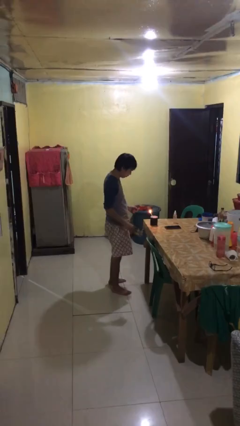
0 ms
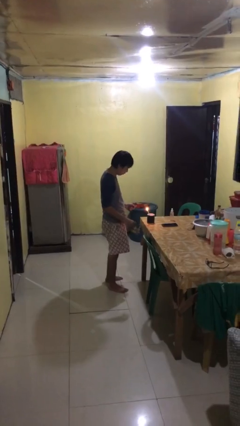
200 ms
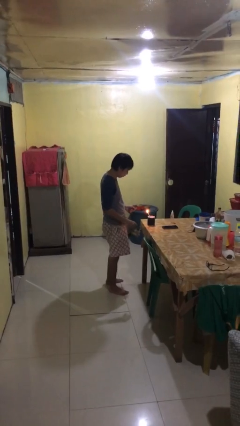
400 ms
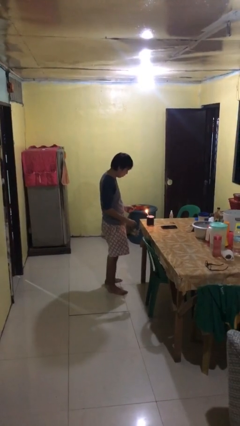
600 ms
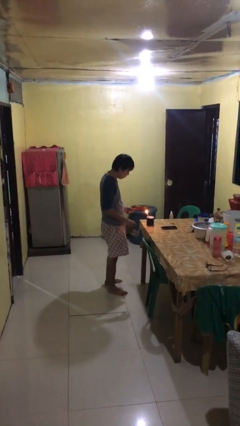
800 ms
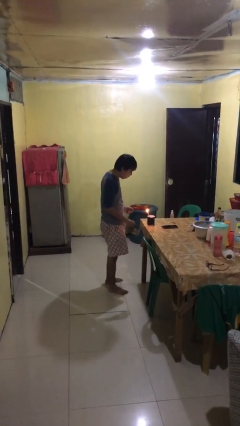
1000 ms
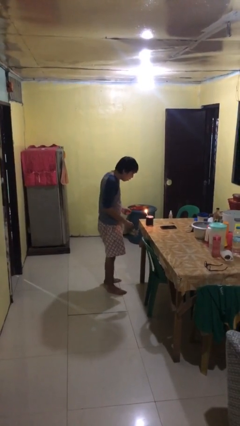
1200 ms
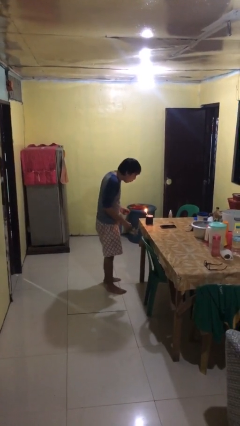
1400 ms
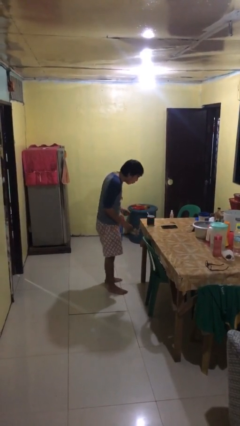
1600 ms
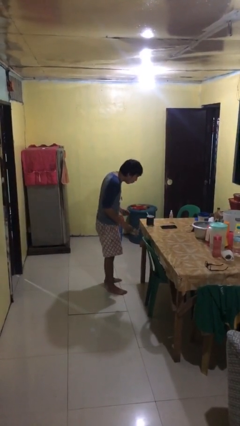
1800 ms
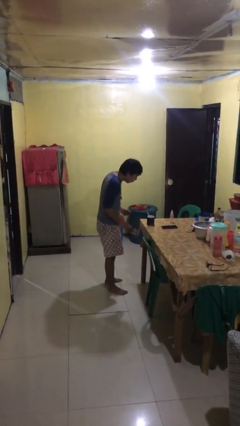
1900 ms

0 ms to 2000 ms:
person extinguishes candle

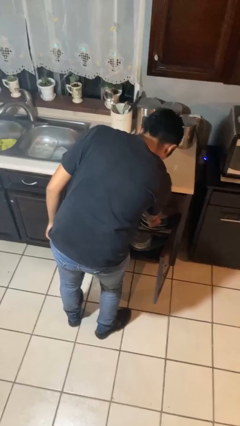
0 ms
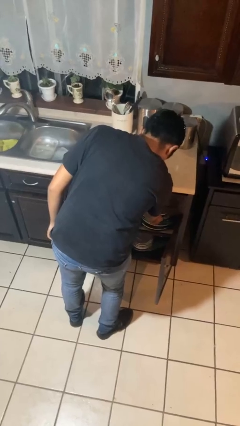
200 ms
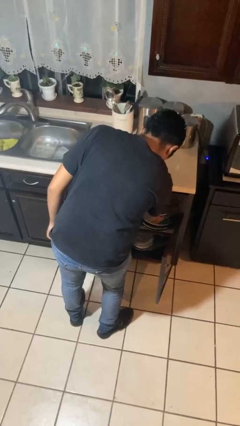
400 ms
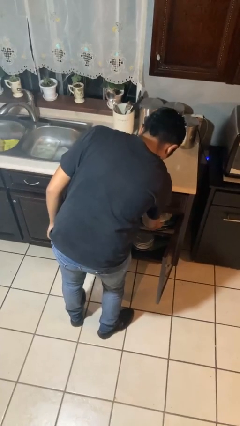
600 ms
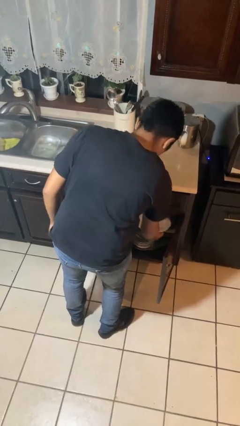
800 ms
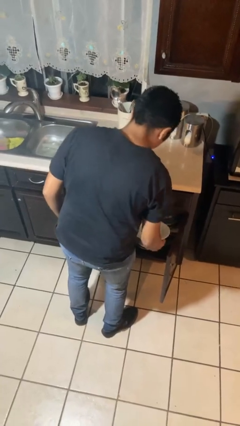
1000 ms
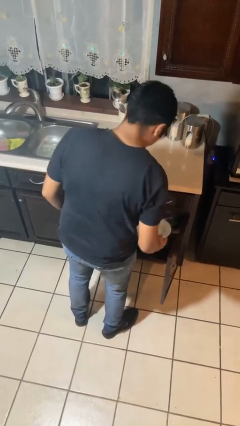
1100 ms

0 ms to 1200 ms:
person puts object in cabinet

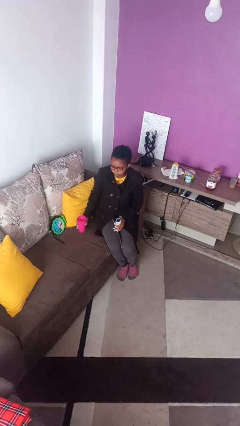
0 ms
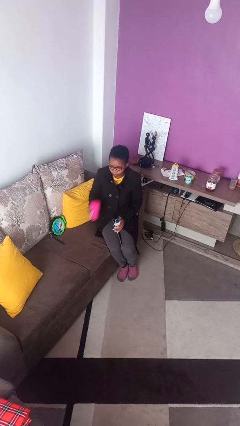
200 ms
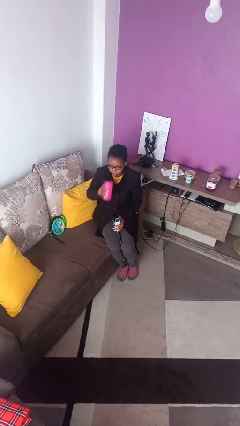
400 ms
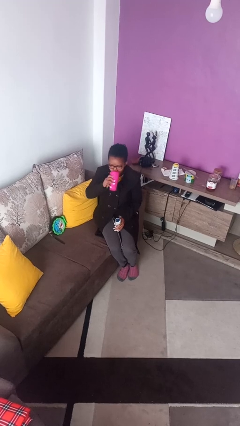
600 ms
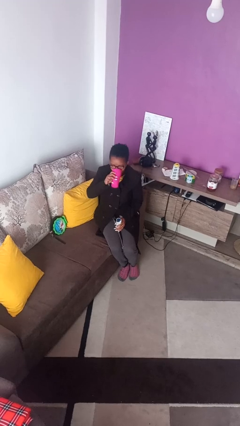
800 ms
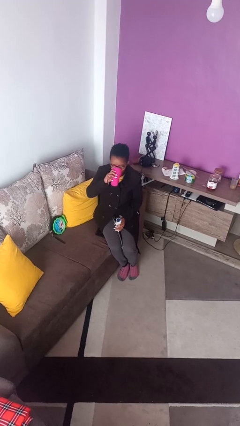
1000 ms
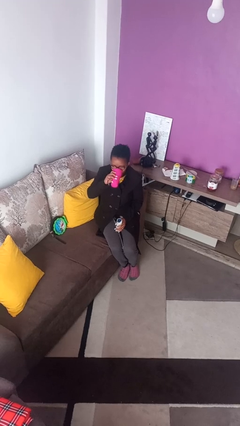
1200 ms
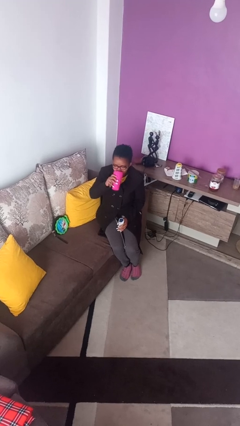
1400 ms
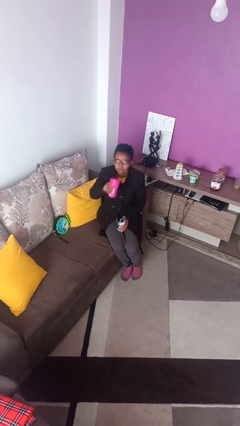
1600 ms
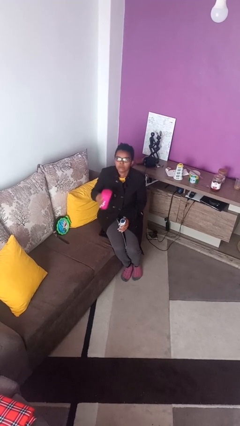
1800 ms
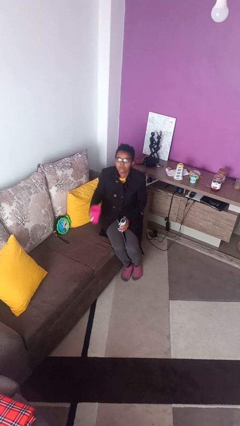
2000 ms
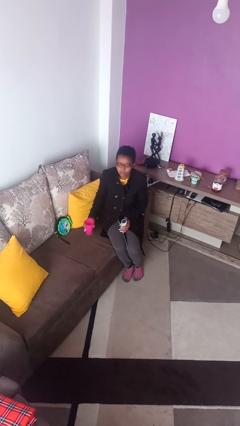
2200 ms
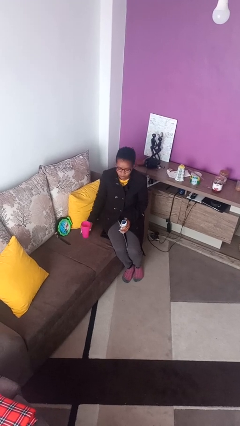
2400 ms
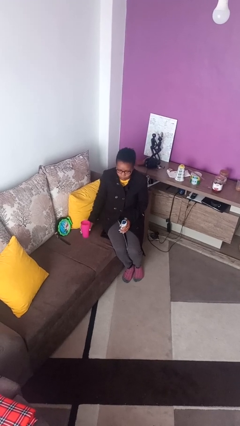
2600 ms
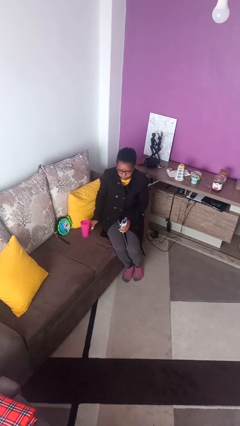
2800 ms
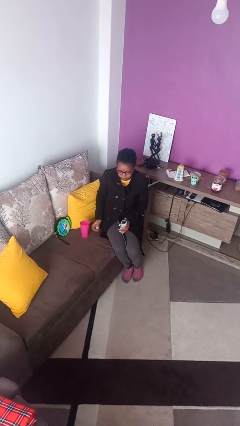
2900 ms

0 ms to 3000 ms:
person drinks from cup

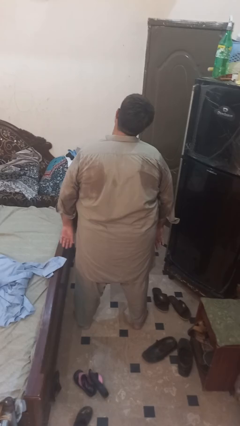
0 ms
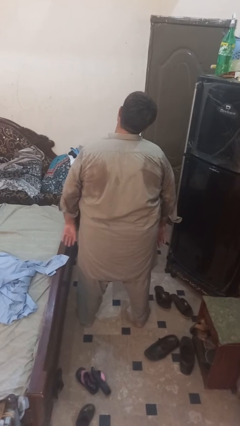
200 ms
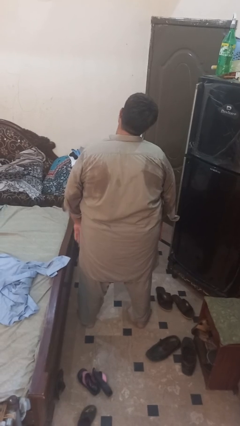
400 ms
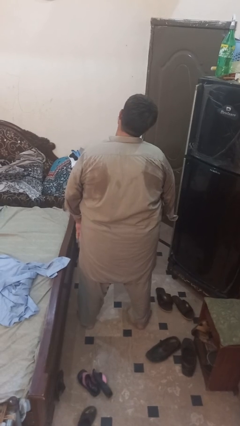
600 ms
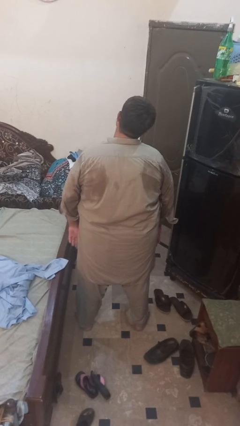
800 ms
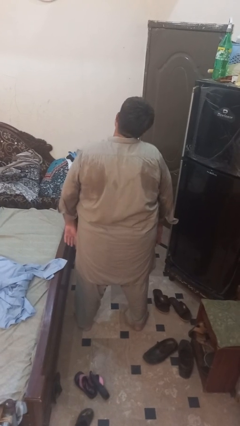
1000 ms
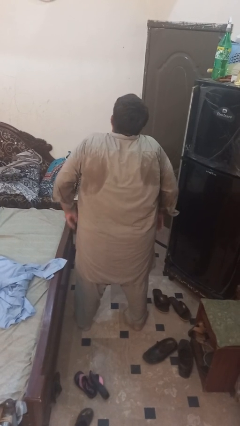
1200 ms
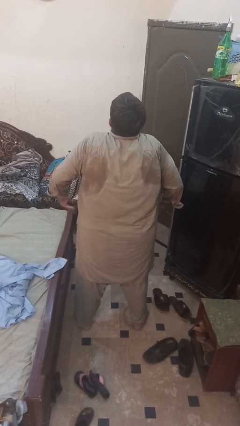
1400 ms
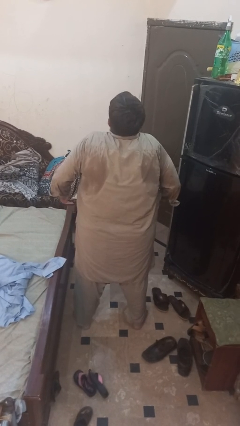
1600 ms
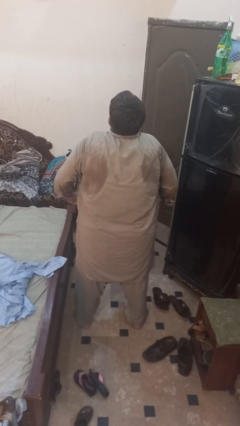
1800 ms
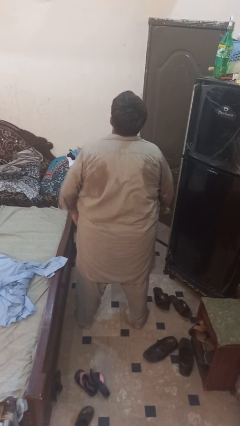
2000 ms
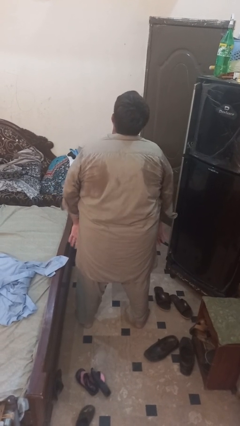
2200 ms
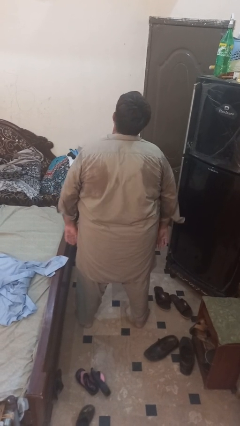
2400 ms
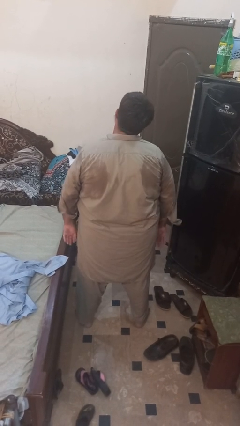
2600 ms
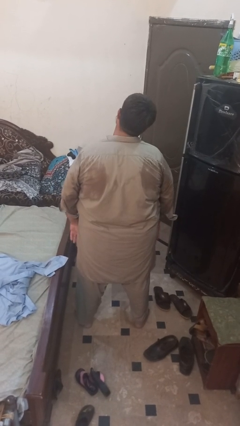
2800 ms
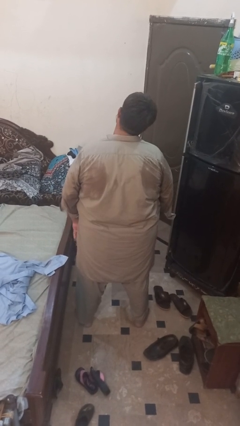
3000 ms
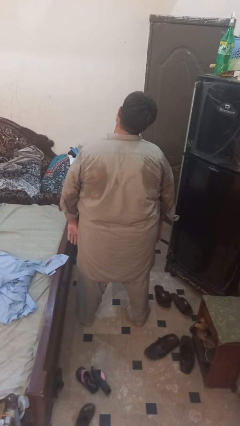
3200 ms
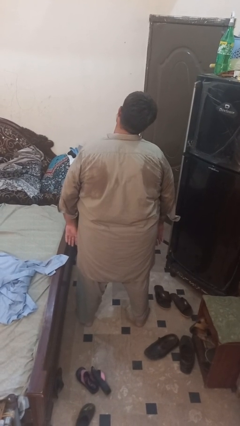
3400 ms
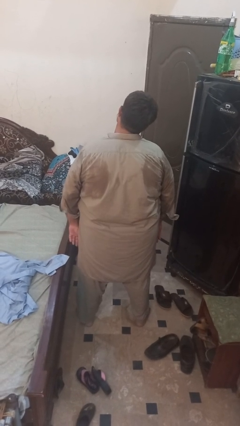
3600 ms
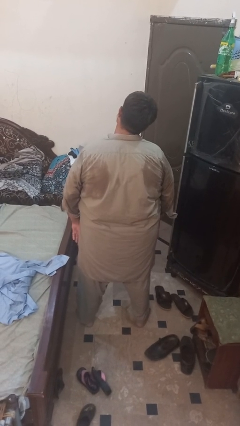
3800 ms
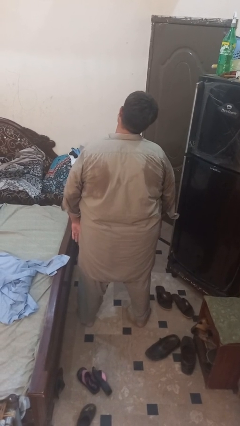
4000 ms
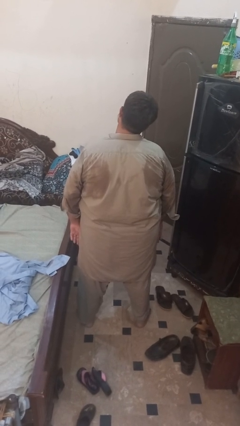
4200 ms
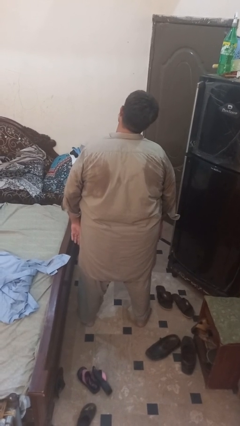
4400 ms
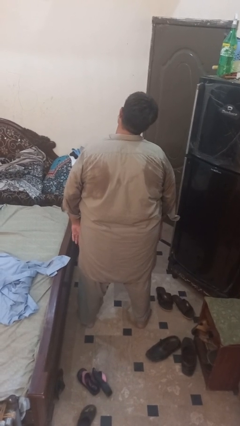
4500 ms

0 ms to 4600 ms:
person shrugs

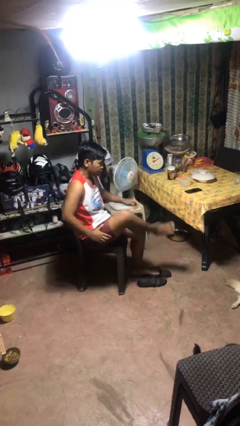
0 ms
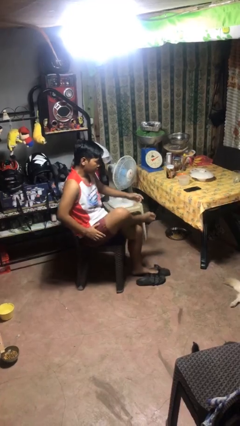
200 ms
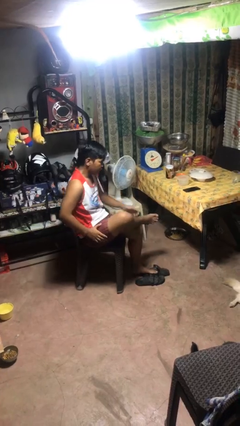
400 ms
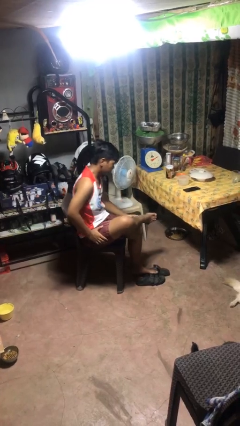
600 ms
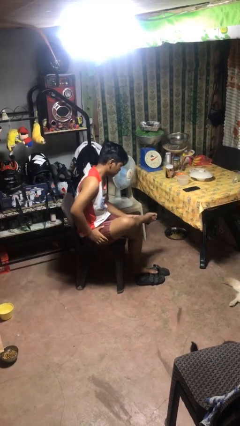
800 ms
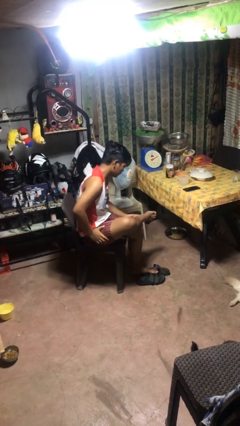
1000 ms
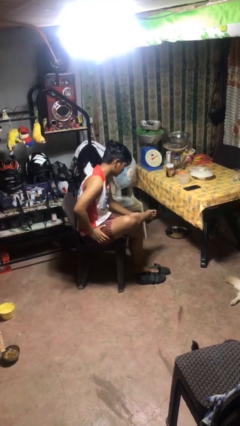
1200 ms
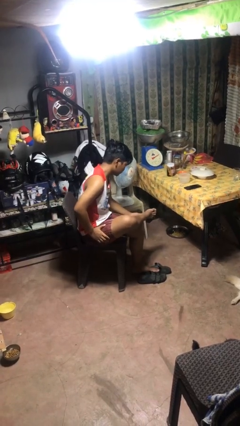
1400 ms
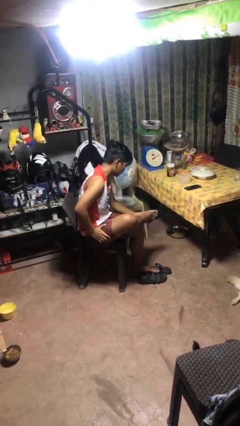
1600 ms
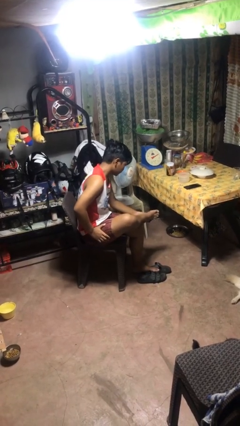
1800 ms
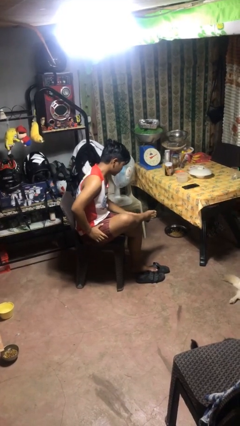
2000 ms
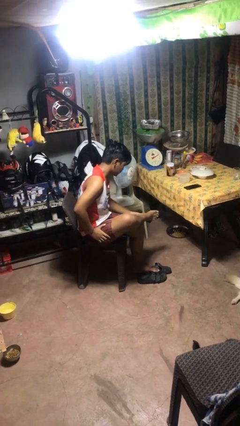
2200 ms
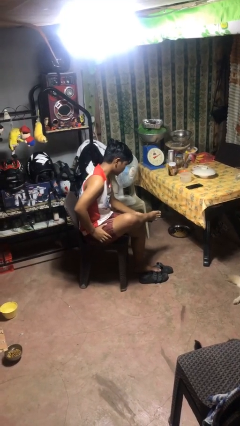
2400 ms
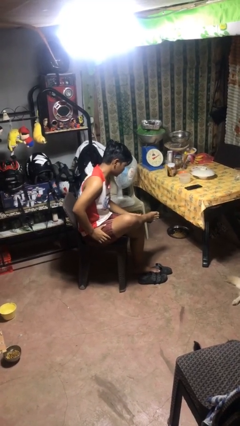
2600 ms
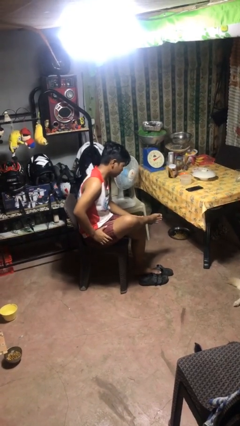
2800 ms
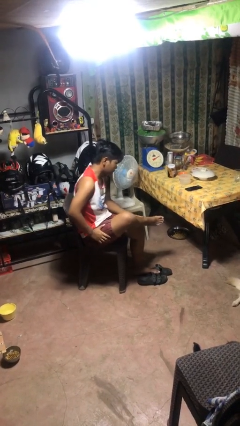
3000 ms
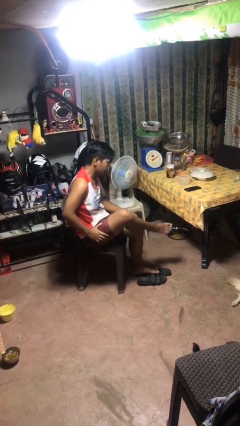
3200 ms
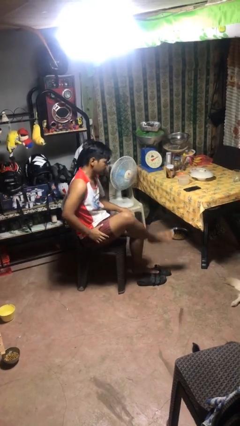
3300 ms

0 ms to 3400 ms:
person rubs foot

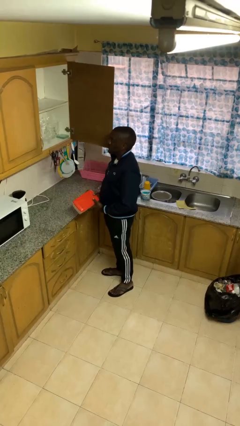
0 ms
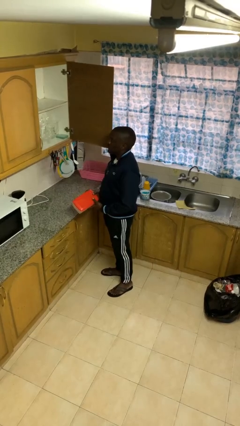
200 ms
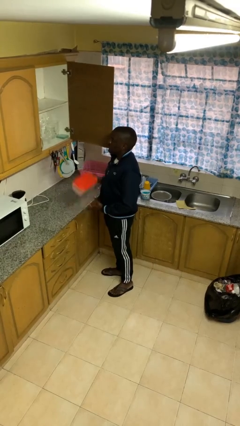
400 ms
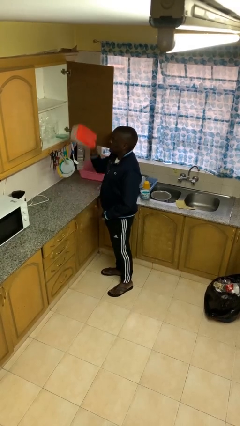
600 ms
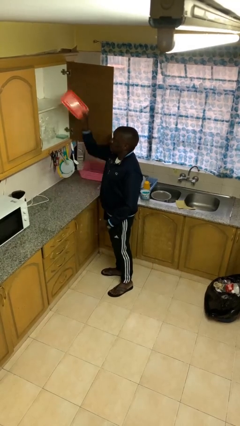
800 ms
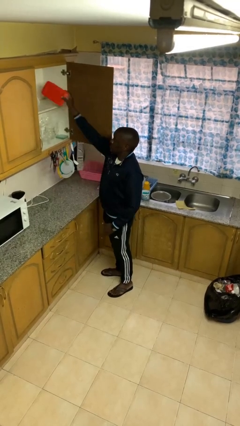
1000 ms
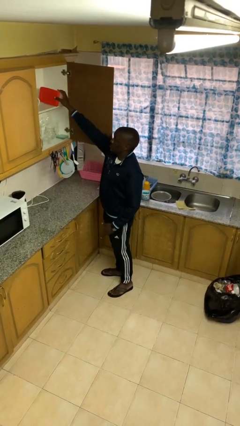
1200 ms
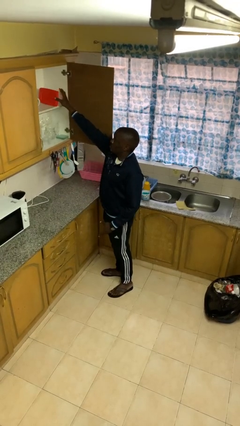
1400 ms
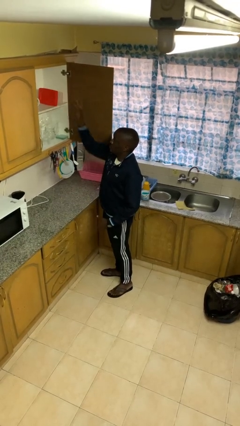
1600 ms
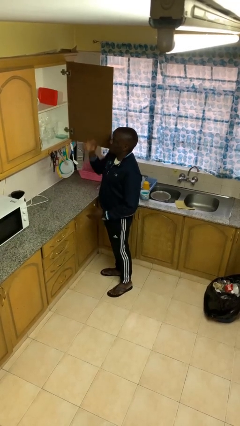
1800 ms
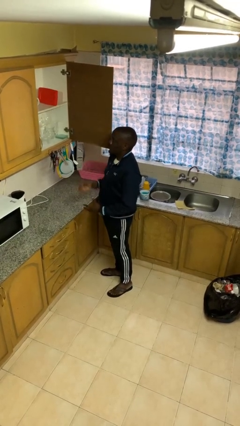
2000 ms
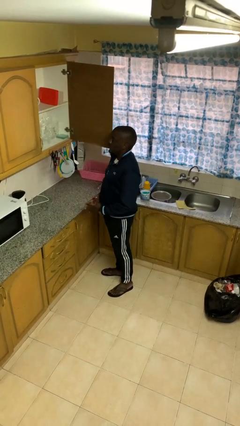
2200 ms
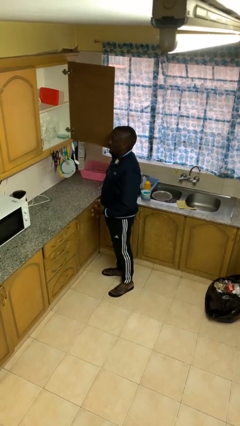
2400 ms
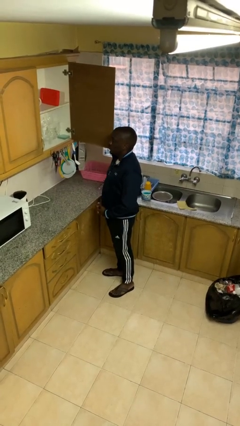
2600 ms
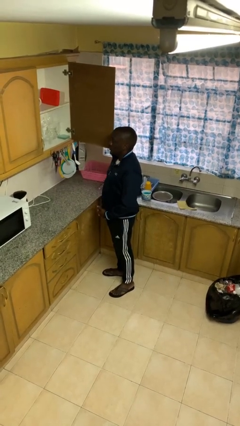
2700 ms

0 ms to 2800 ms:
person puts down object on shelf

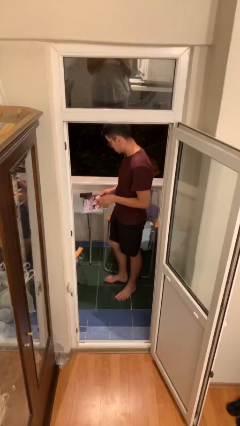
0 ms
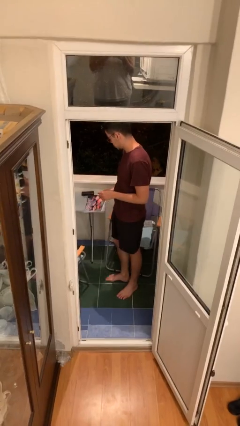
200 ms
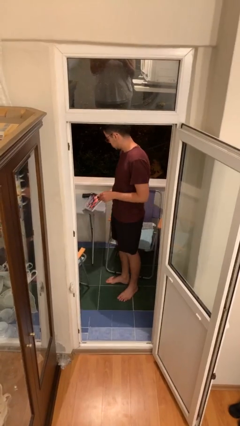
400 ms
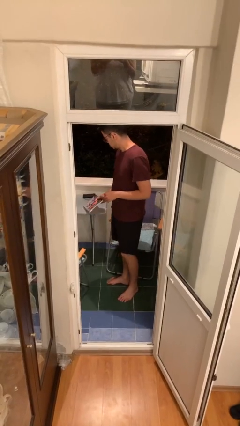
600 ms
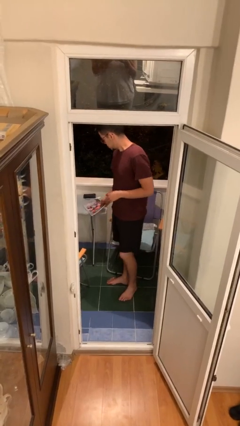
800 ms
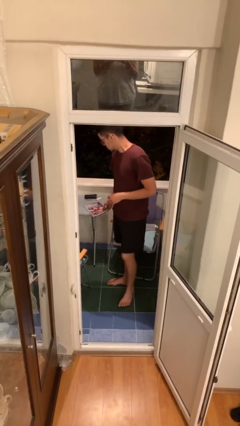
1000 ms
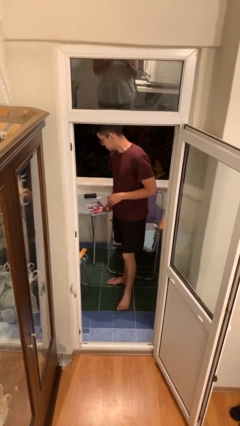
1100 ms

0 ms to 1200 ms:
person puts down object on table
